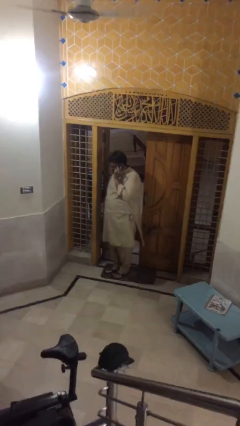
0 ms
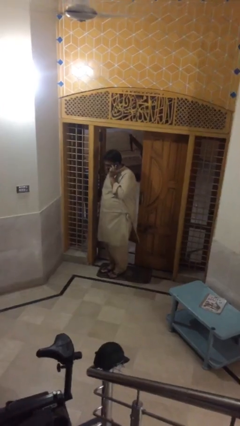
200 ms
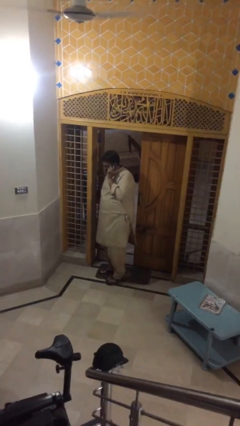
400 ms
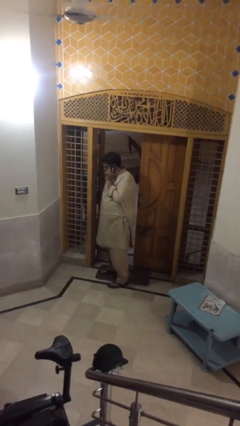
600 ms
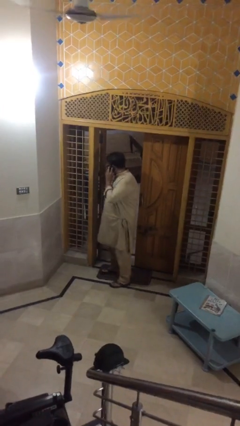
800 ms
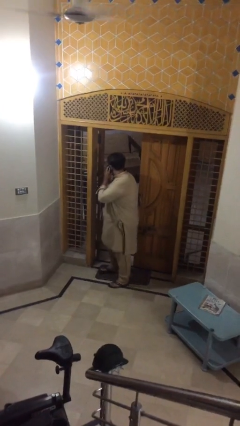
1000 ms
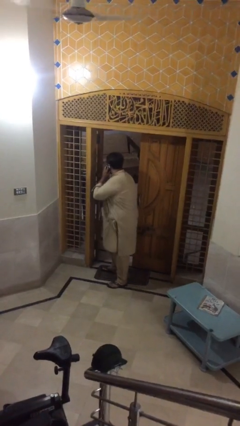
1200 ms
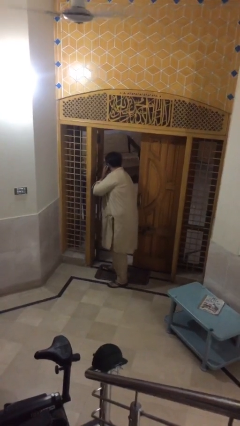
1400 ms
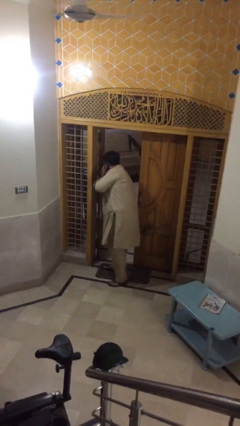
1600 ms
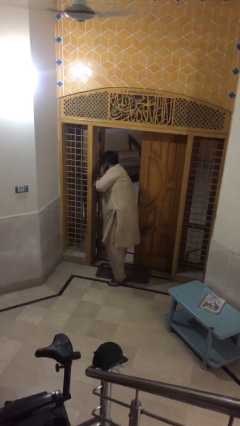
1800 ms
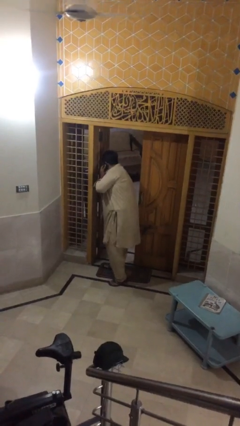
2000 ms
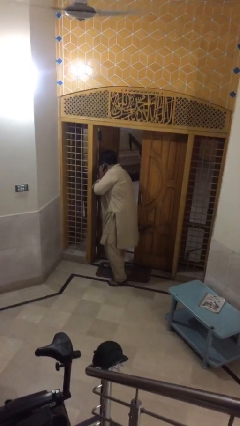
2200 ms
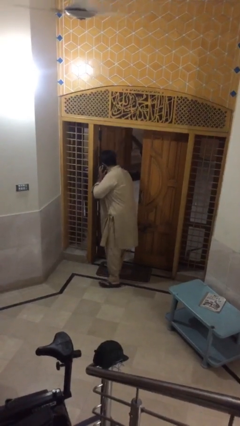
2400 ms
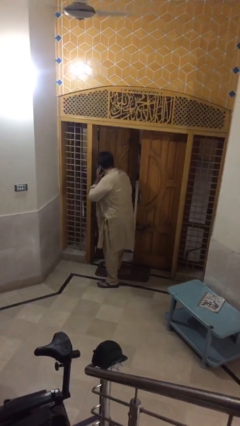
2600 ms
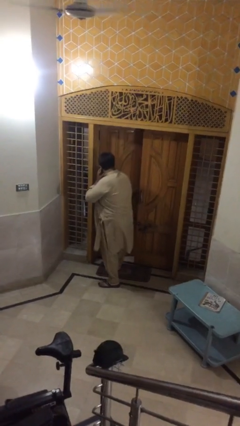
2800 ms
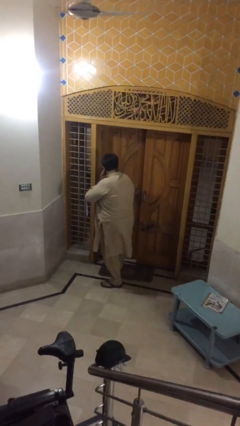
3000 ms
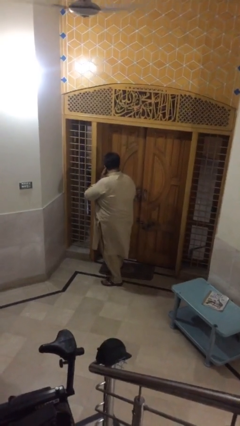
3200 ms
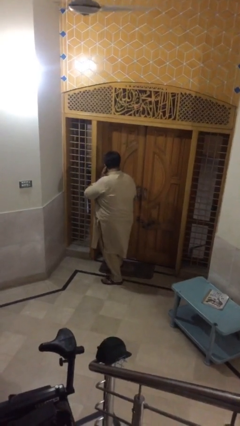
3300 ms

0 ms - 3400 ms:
person closes facility door

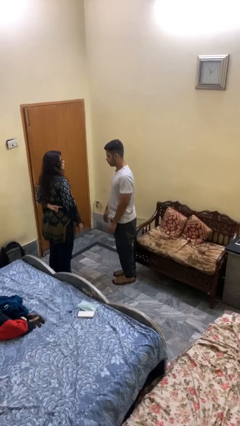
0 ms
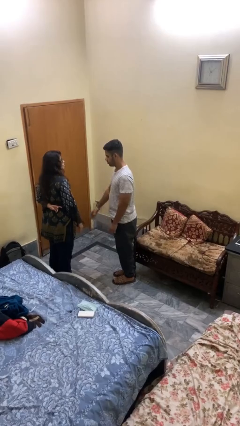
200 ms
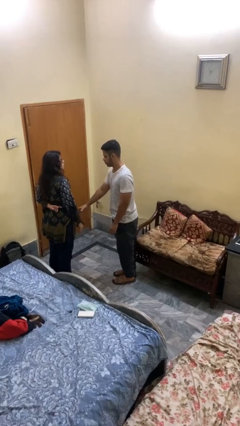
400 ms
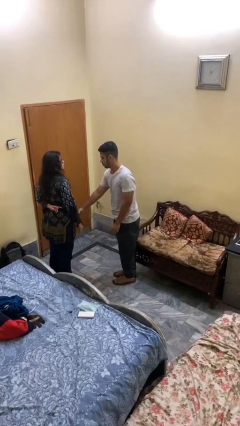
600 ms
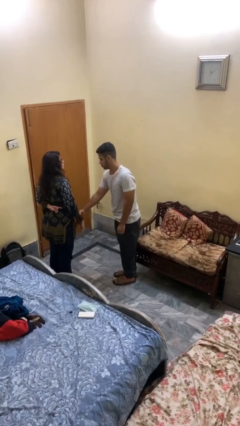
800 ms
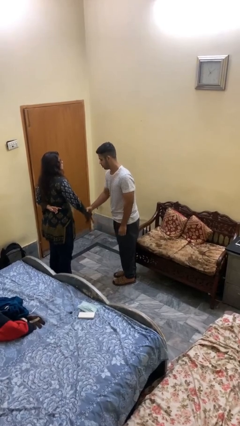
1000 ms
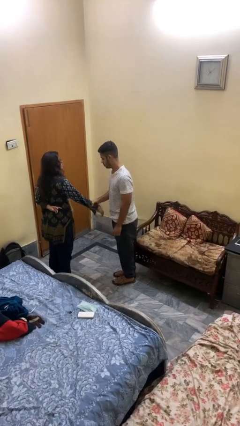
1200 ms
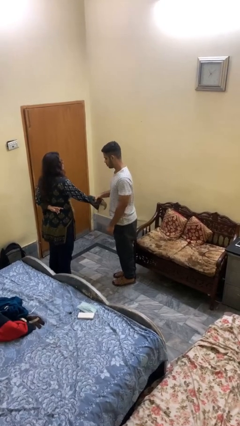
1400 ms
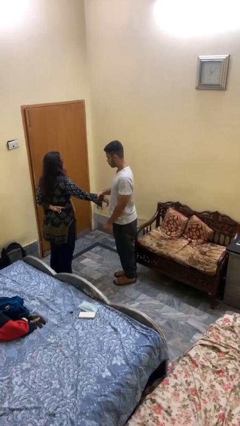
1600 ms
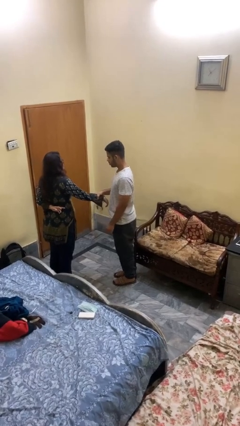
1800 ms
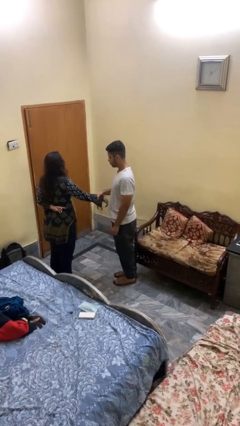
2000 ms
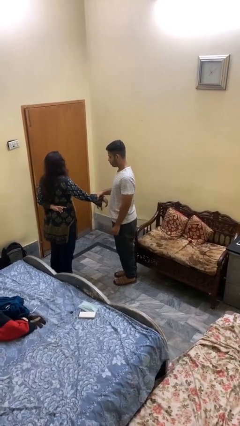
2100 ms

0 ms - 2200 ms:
person grabs person by forearm

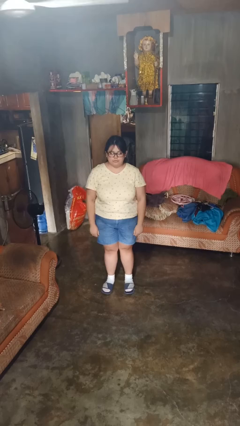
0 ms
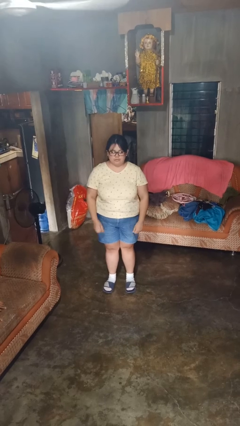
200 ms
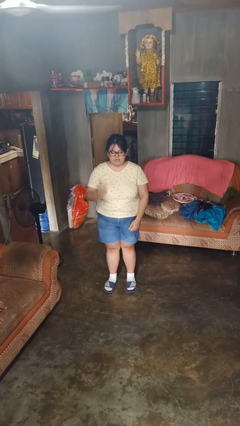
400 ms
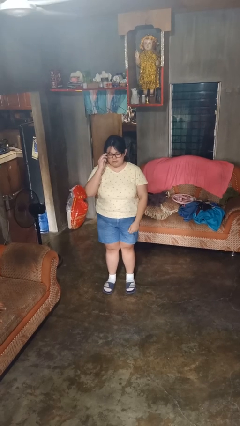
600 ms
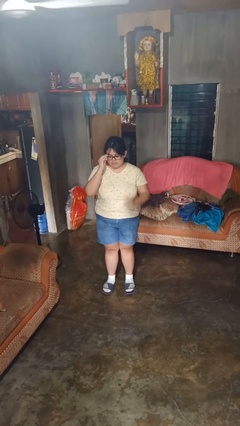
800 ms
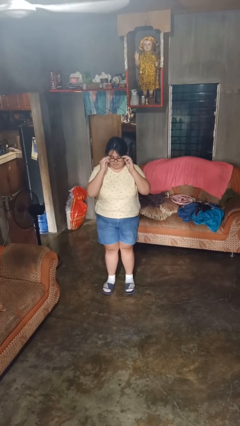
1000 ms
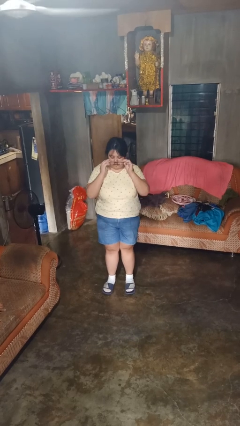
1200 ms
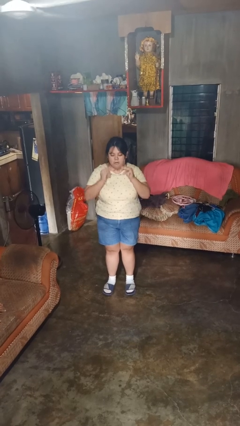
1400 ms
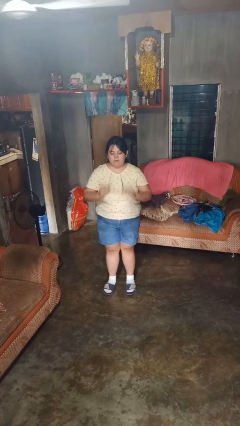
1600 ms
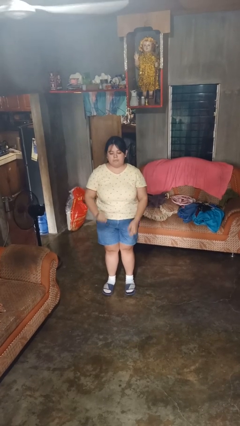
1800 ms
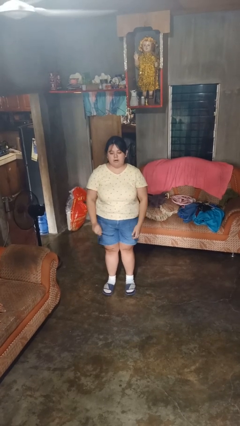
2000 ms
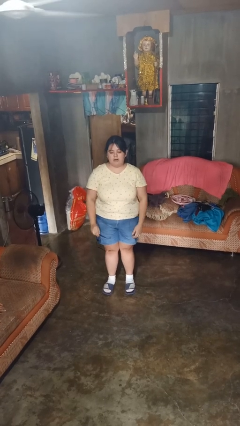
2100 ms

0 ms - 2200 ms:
person takes off glasses

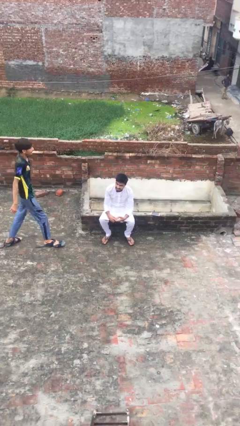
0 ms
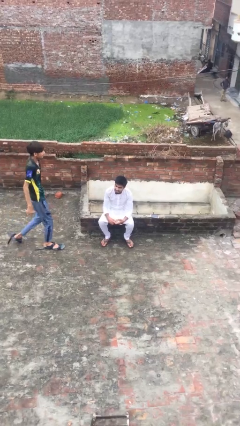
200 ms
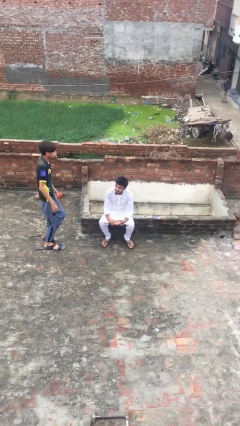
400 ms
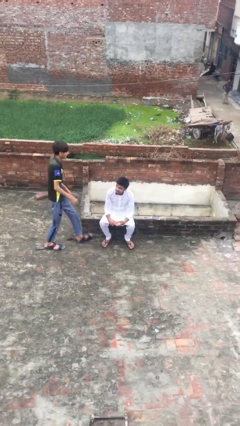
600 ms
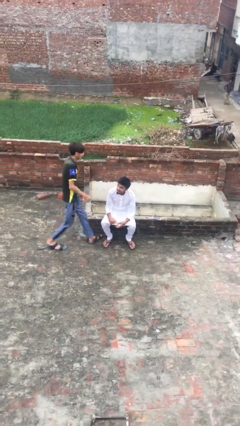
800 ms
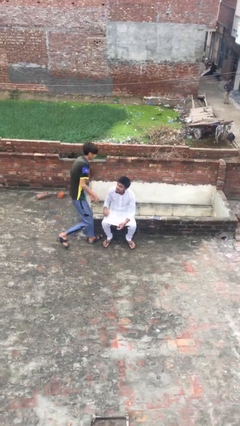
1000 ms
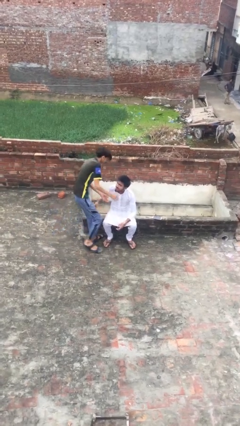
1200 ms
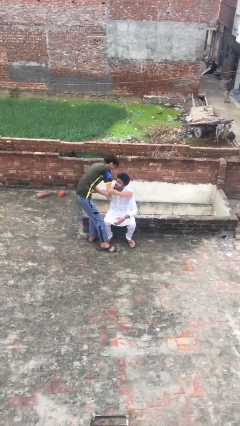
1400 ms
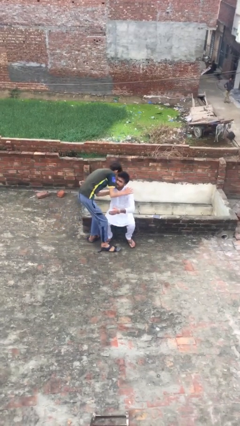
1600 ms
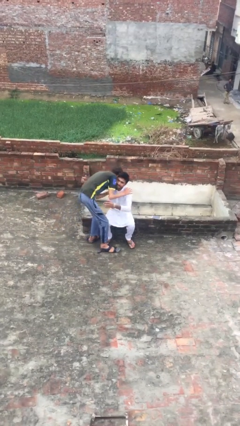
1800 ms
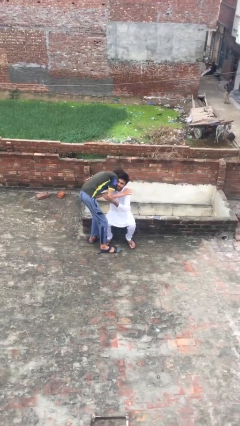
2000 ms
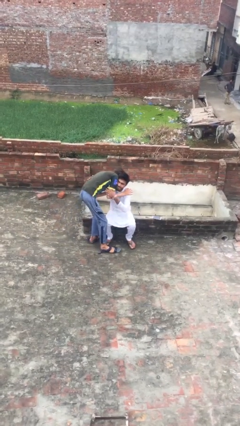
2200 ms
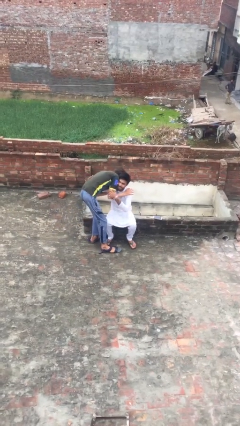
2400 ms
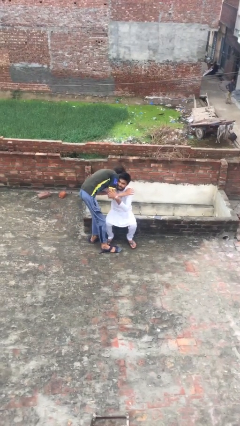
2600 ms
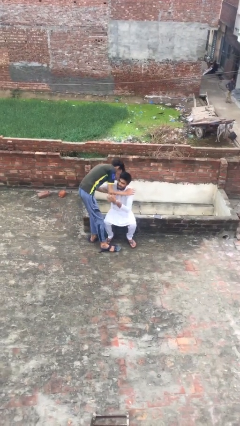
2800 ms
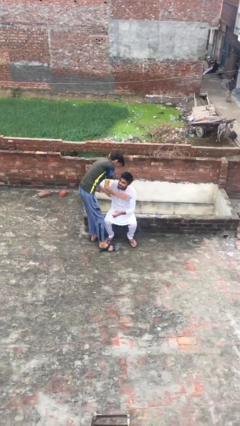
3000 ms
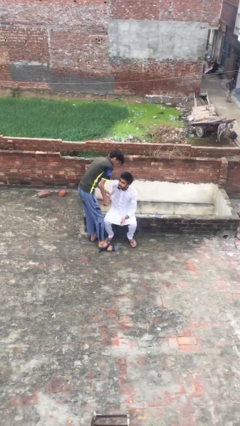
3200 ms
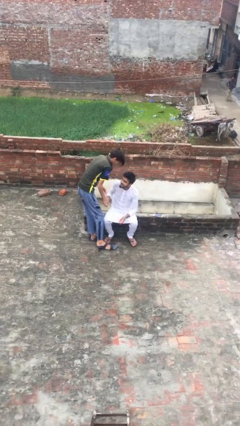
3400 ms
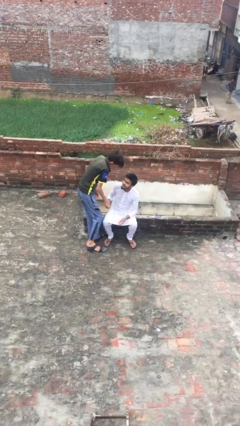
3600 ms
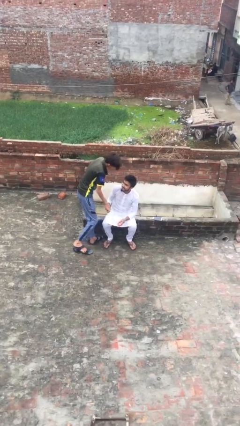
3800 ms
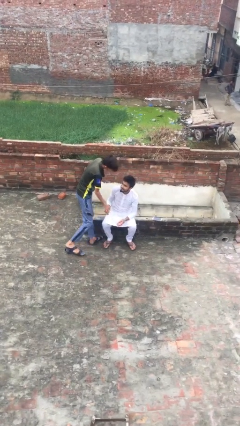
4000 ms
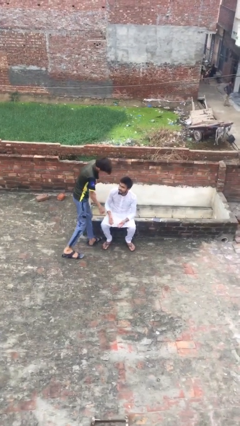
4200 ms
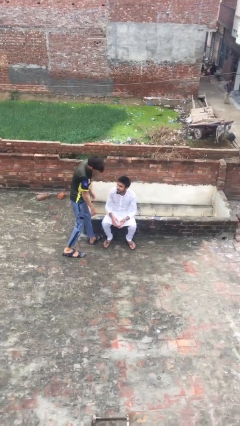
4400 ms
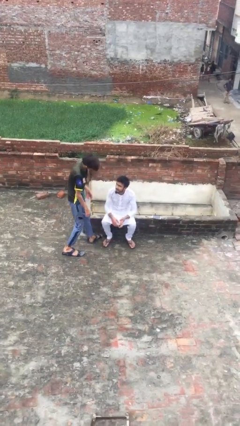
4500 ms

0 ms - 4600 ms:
person embraces person

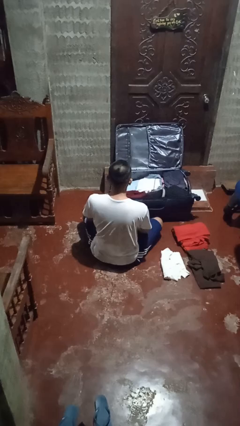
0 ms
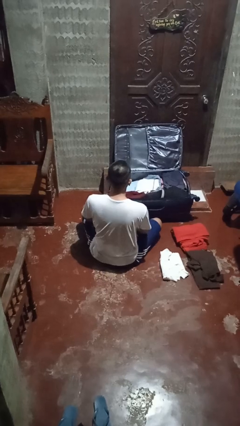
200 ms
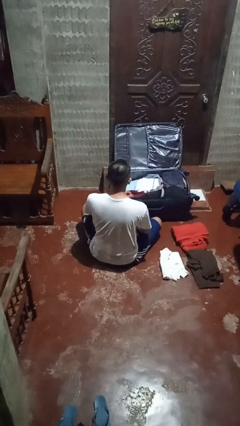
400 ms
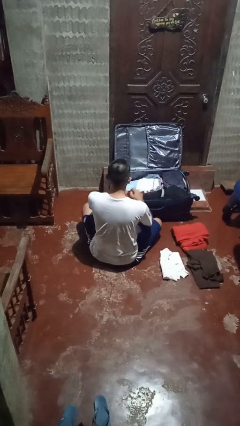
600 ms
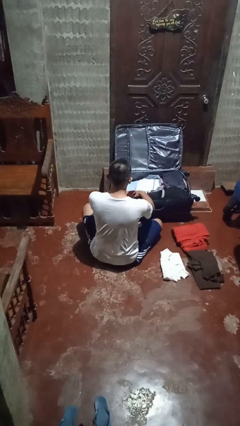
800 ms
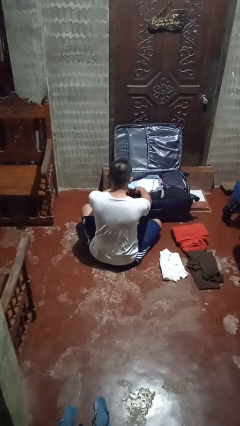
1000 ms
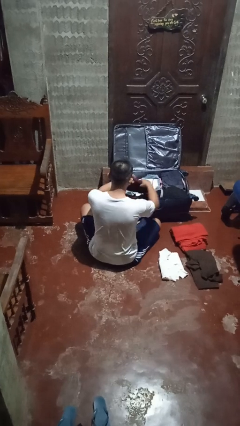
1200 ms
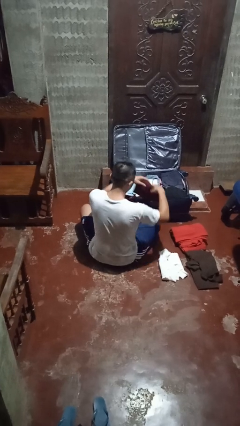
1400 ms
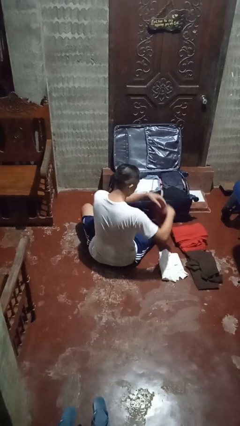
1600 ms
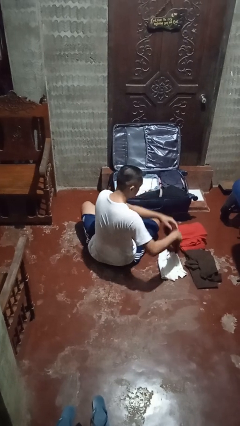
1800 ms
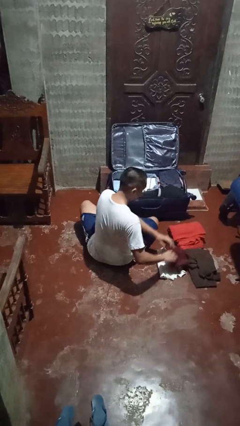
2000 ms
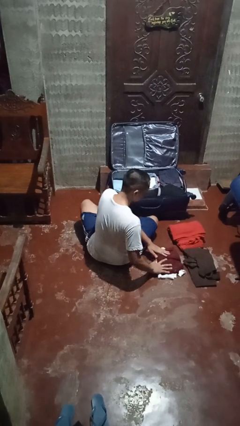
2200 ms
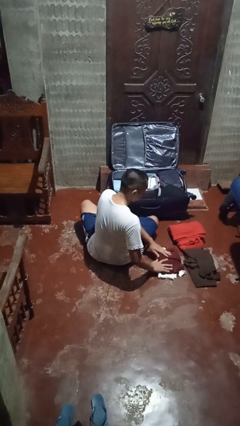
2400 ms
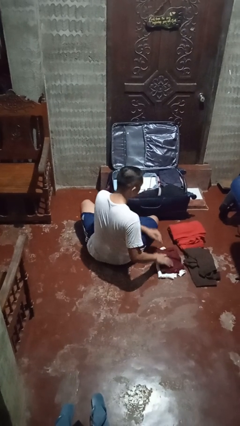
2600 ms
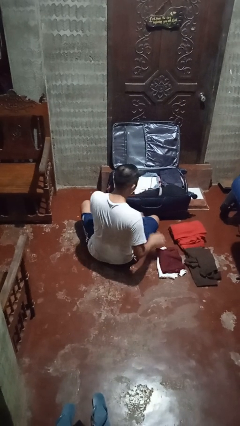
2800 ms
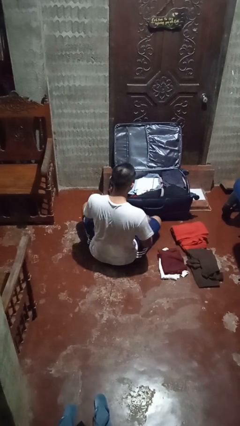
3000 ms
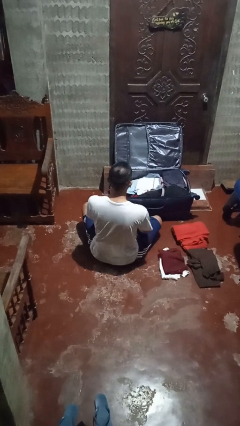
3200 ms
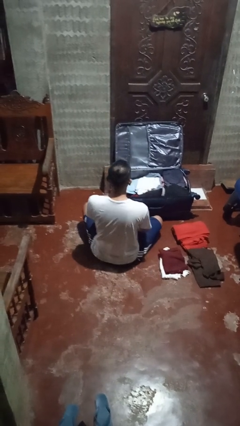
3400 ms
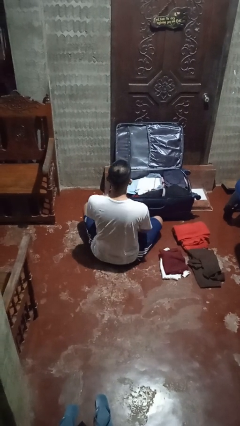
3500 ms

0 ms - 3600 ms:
person unloads clothes from suitcase

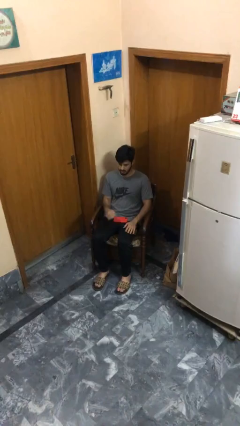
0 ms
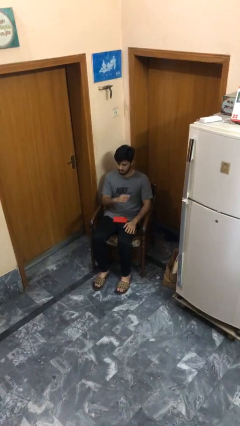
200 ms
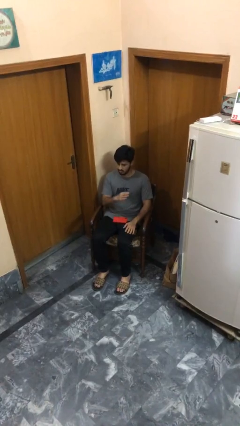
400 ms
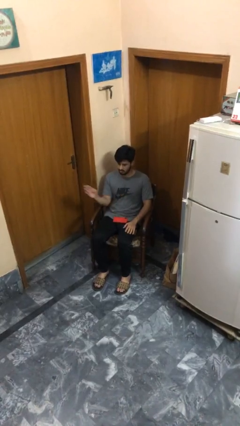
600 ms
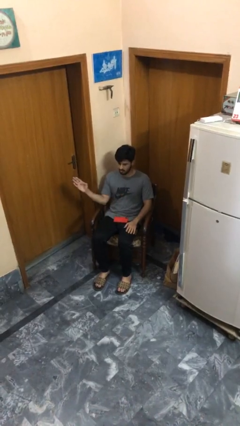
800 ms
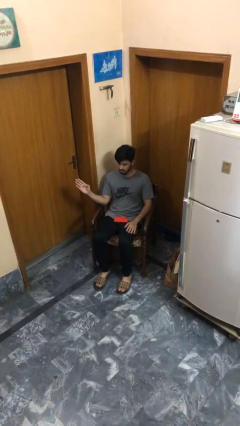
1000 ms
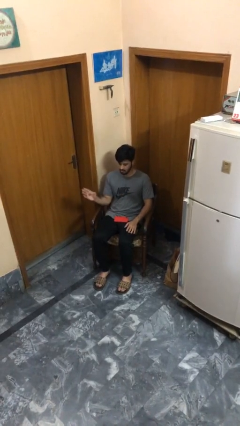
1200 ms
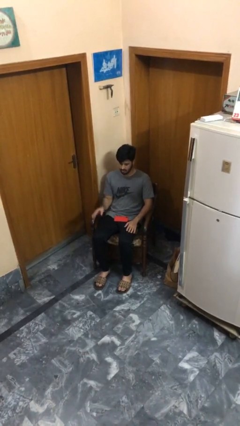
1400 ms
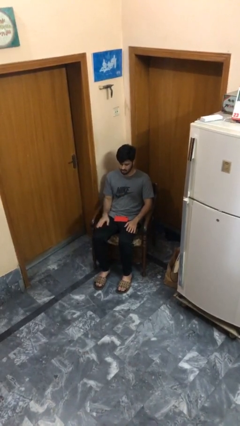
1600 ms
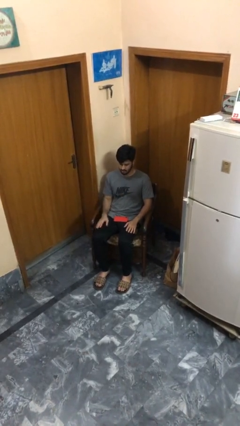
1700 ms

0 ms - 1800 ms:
person gestures swipe right
